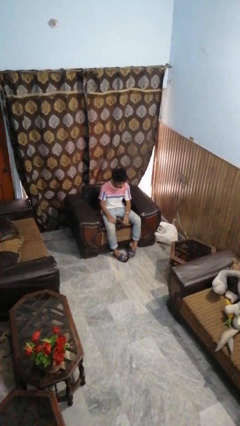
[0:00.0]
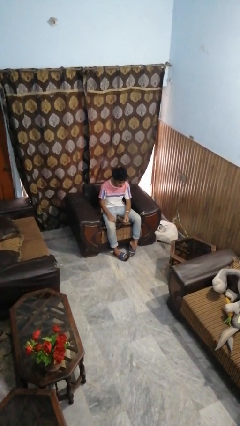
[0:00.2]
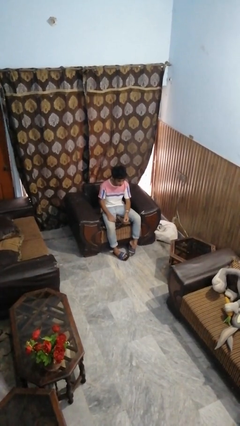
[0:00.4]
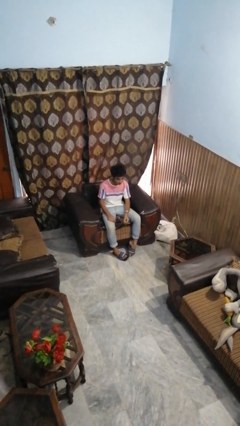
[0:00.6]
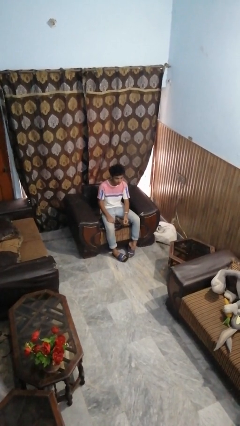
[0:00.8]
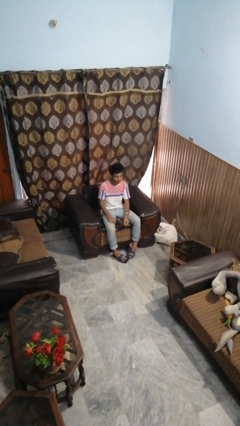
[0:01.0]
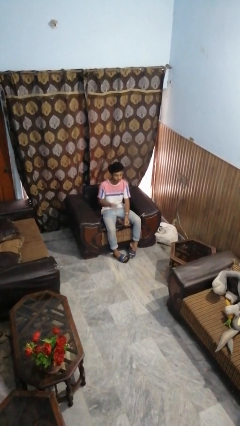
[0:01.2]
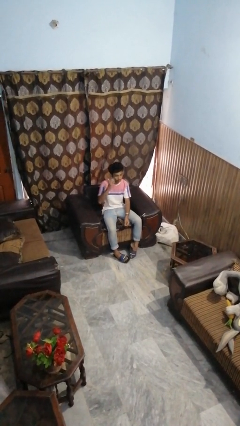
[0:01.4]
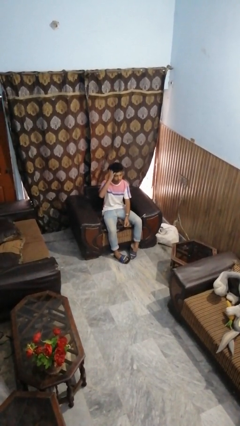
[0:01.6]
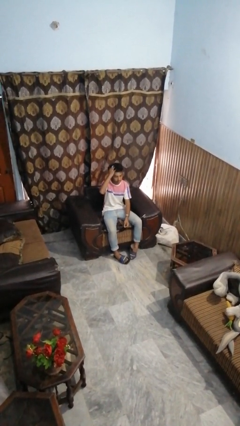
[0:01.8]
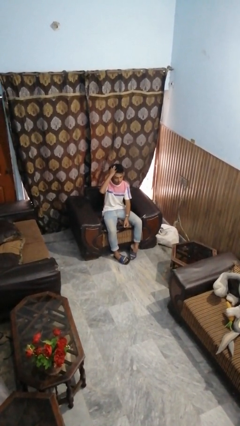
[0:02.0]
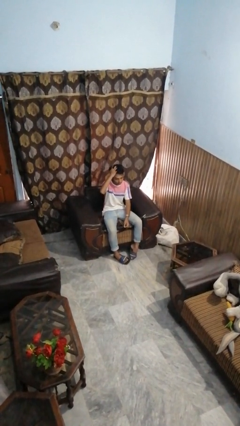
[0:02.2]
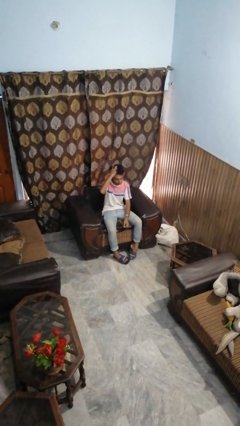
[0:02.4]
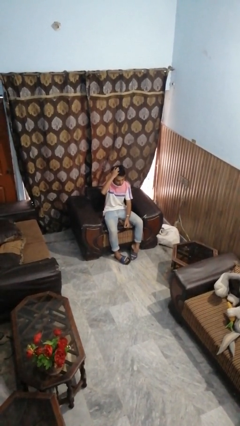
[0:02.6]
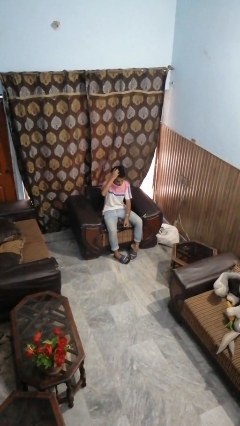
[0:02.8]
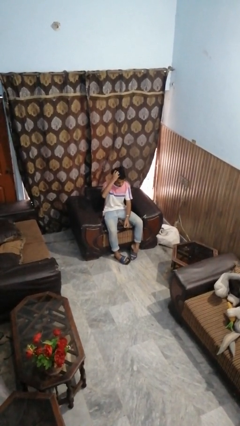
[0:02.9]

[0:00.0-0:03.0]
person strokes hair

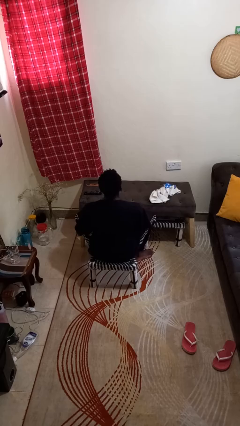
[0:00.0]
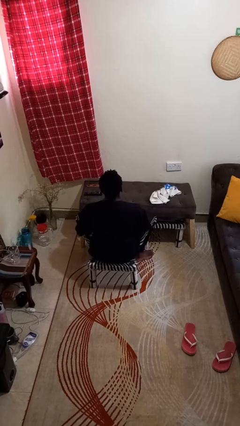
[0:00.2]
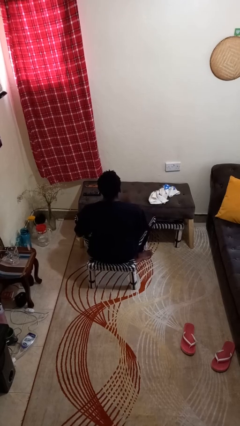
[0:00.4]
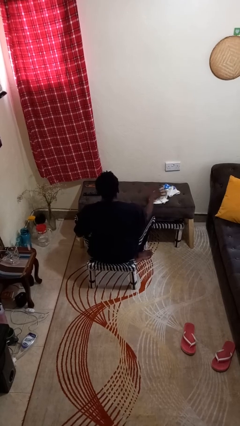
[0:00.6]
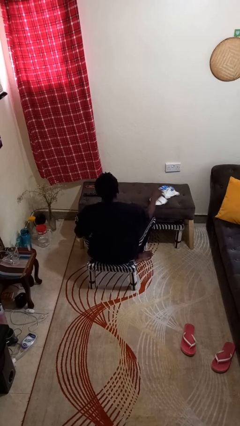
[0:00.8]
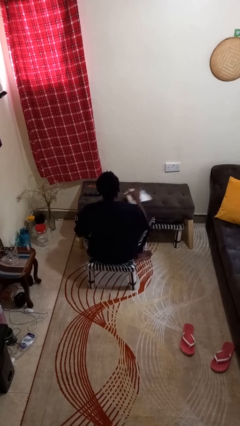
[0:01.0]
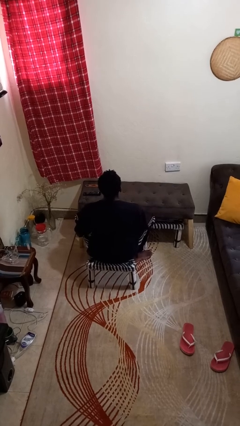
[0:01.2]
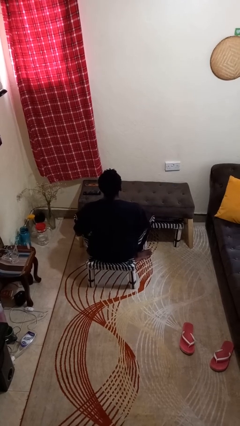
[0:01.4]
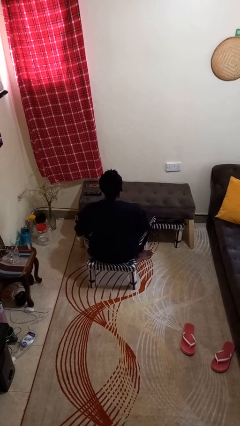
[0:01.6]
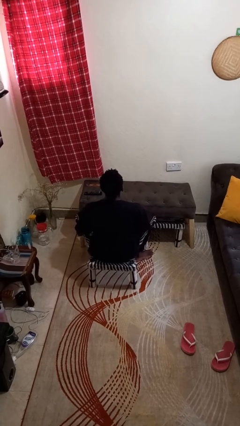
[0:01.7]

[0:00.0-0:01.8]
person picks up object from table

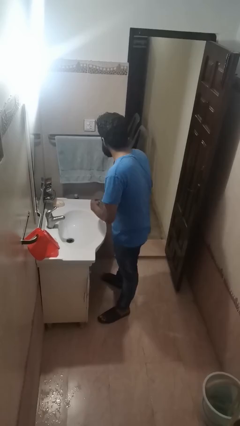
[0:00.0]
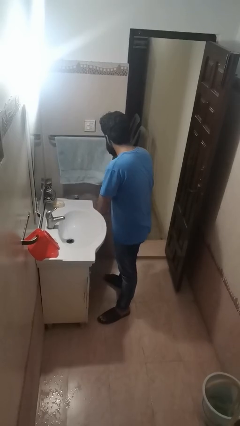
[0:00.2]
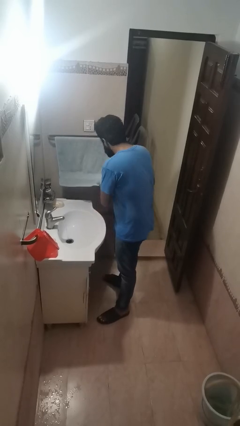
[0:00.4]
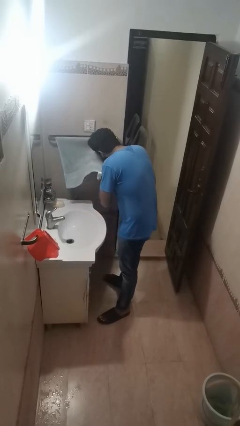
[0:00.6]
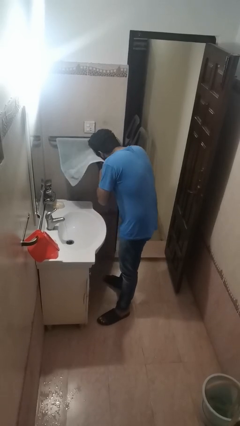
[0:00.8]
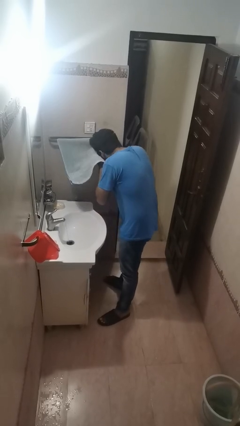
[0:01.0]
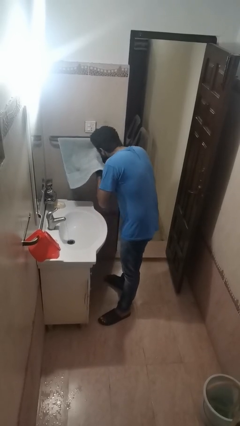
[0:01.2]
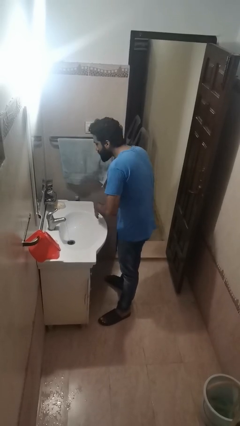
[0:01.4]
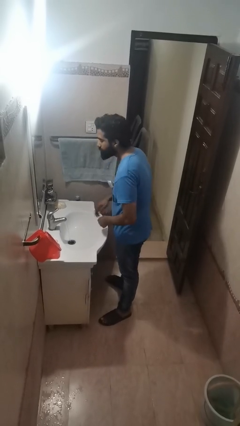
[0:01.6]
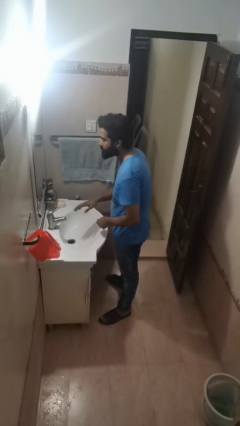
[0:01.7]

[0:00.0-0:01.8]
person dries face with towel

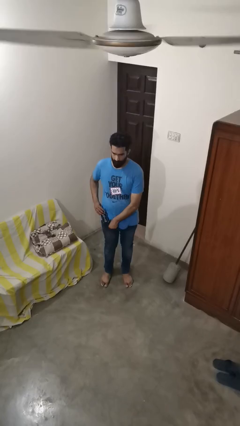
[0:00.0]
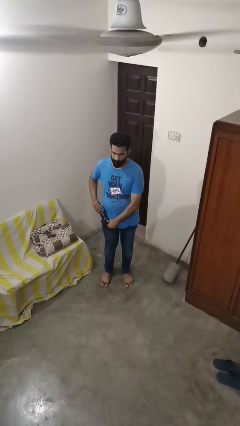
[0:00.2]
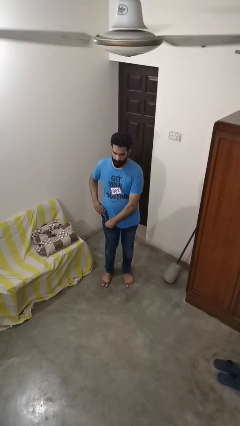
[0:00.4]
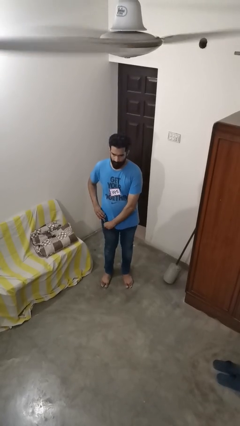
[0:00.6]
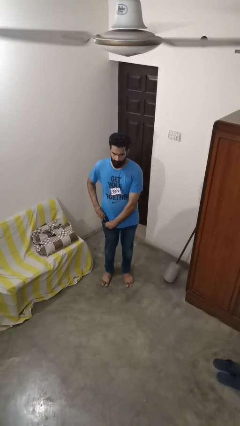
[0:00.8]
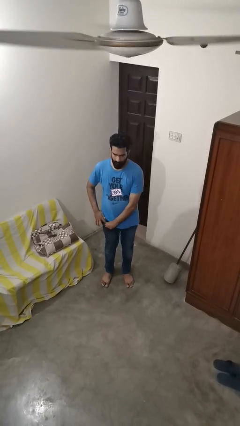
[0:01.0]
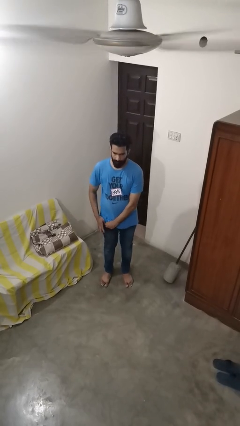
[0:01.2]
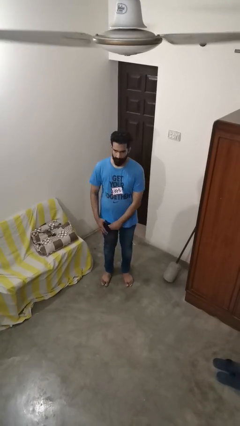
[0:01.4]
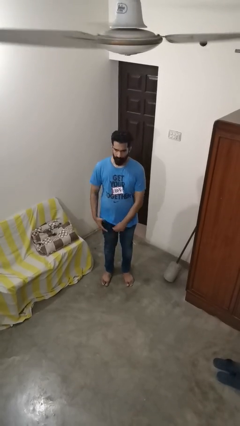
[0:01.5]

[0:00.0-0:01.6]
person puts phone into pocket

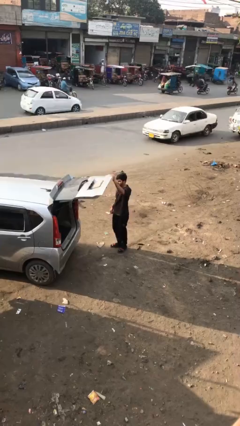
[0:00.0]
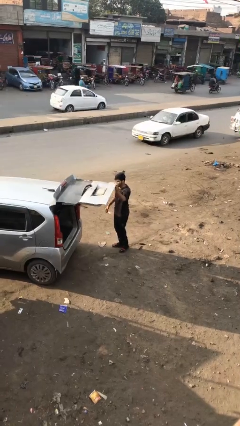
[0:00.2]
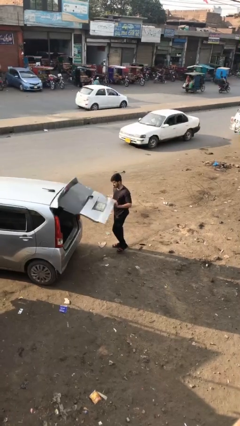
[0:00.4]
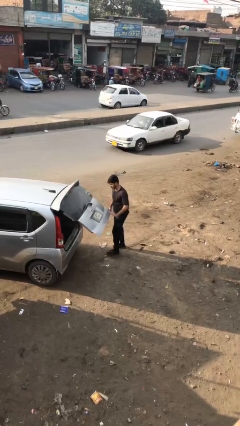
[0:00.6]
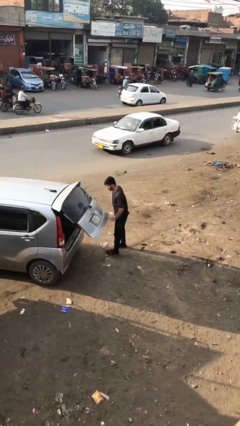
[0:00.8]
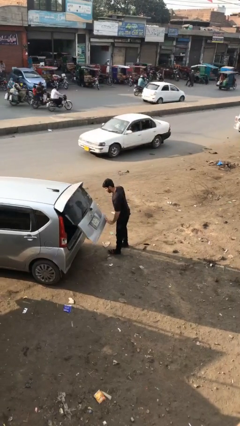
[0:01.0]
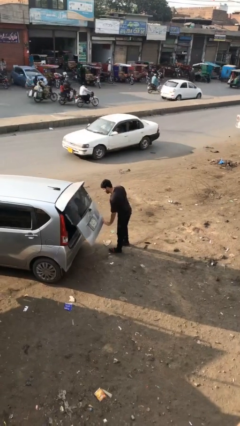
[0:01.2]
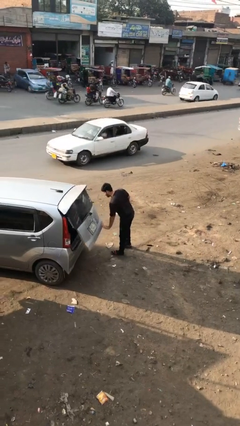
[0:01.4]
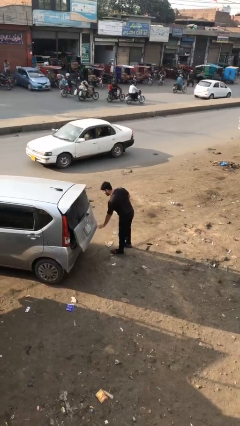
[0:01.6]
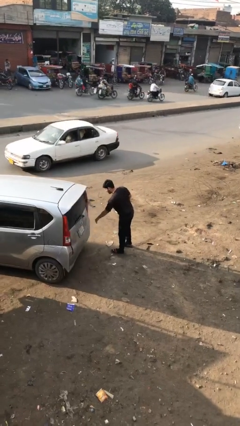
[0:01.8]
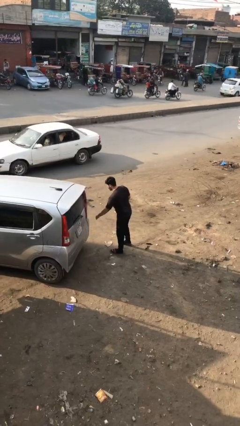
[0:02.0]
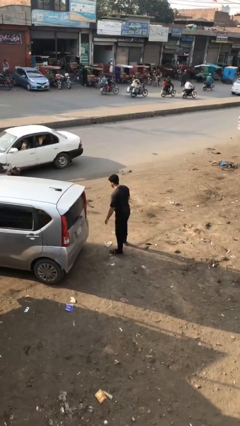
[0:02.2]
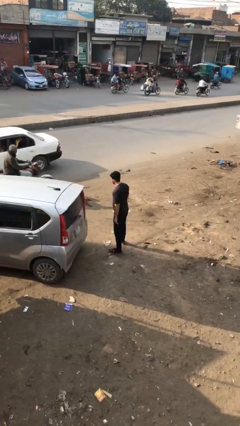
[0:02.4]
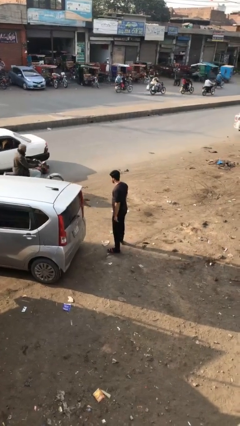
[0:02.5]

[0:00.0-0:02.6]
person closes car trunk

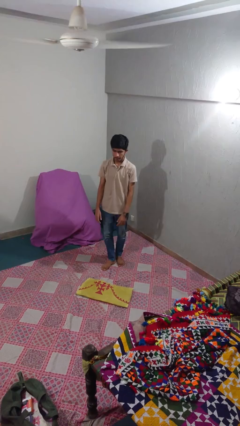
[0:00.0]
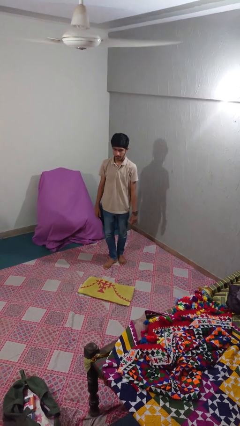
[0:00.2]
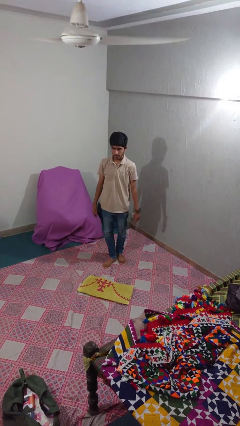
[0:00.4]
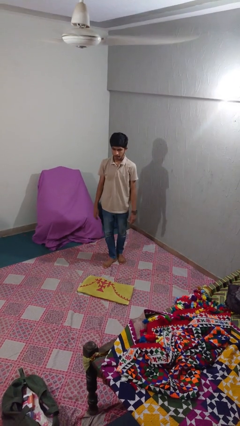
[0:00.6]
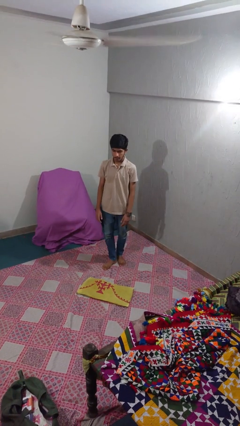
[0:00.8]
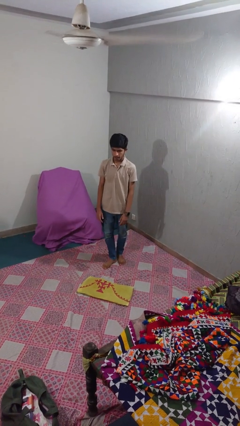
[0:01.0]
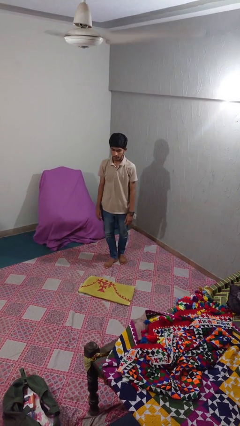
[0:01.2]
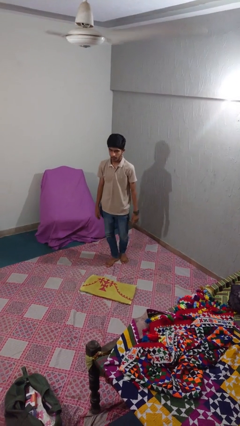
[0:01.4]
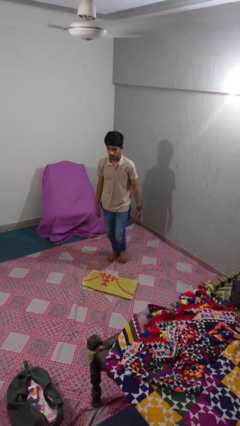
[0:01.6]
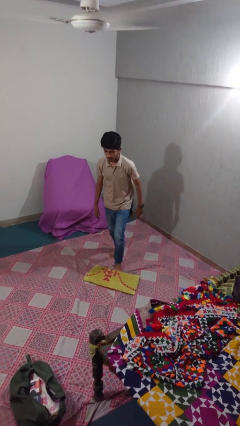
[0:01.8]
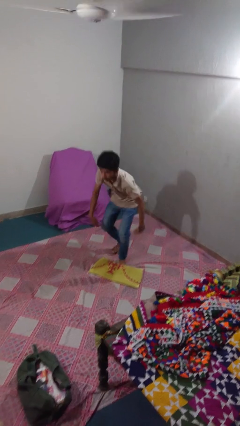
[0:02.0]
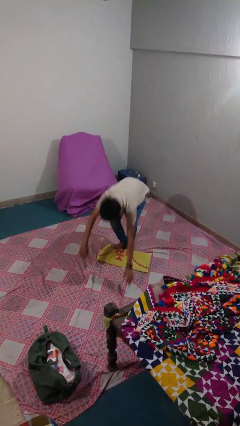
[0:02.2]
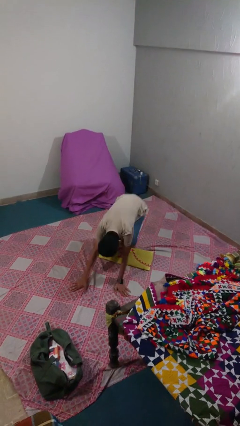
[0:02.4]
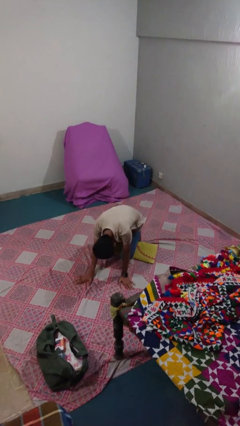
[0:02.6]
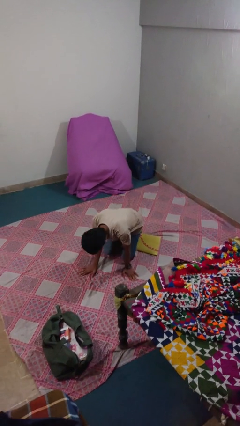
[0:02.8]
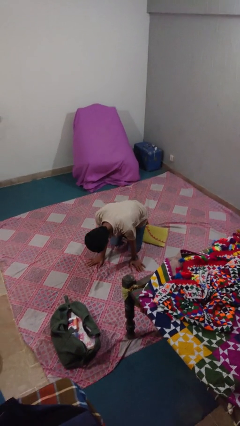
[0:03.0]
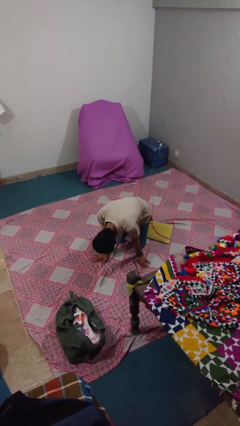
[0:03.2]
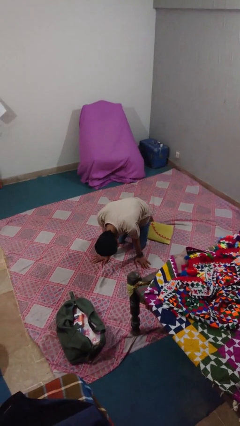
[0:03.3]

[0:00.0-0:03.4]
person trips on object on floor

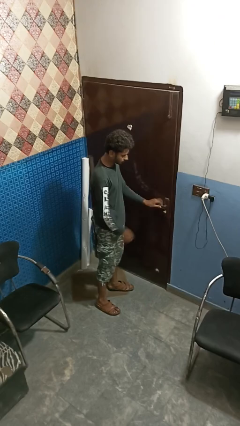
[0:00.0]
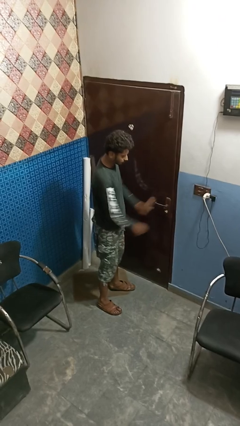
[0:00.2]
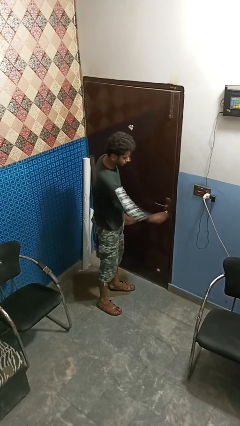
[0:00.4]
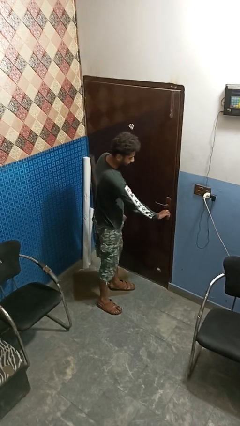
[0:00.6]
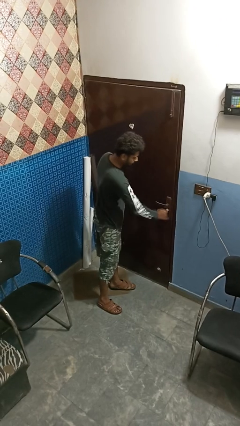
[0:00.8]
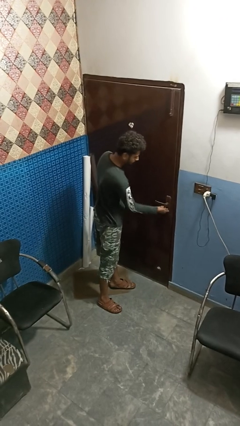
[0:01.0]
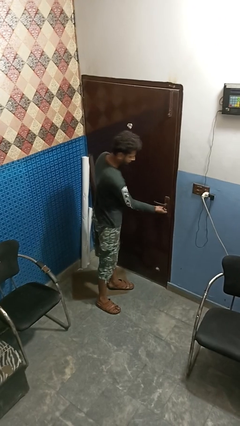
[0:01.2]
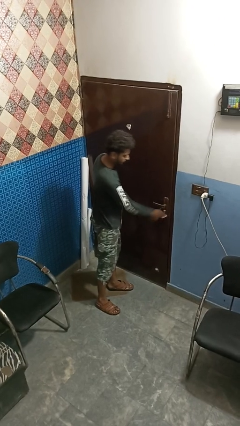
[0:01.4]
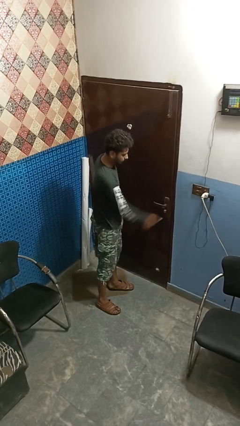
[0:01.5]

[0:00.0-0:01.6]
person locks door with keys

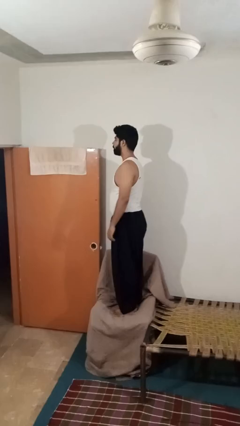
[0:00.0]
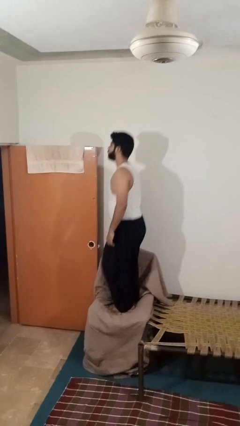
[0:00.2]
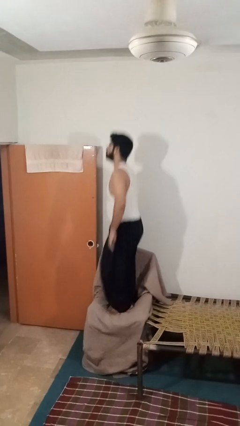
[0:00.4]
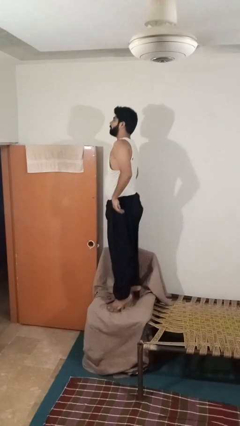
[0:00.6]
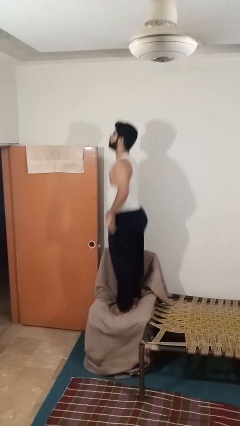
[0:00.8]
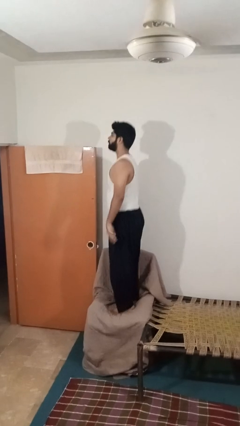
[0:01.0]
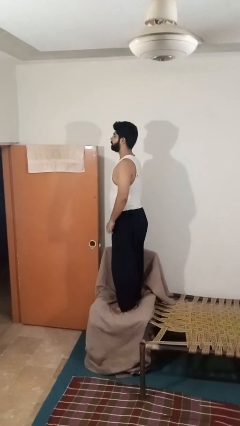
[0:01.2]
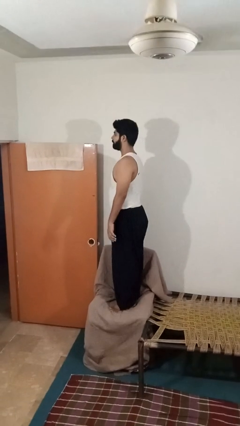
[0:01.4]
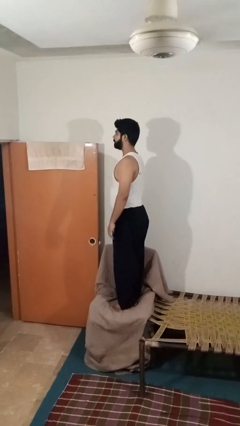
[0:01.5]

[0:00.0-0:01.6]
person jumps on couch
